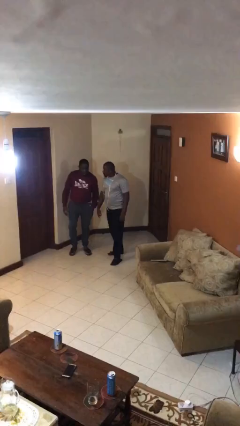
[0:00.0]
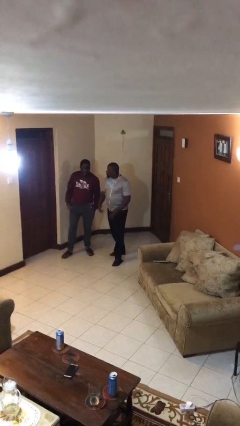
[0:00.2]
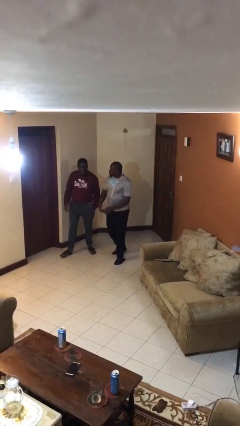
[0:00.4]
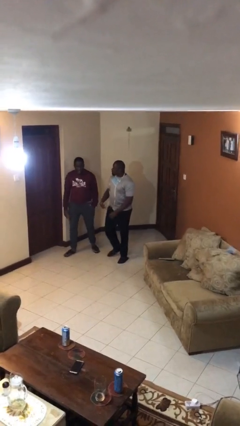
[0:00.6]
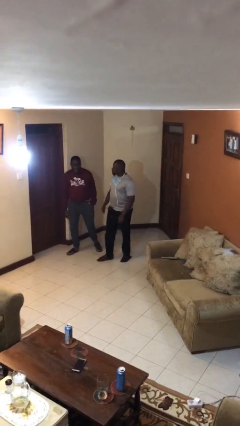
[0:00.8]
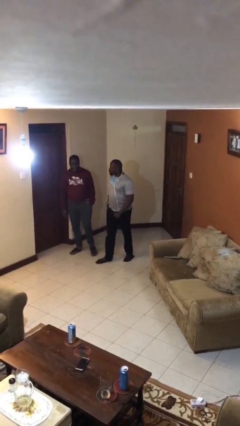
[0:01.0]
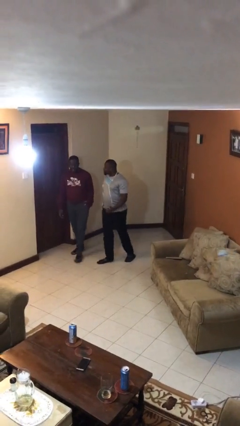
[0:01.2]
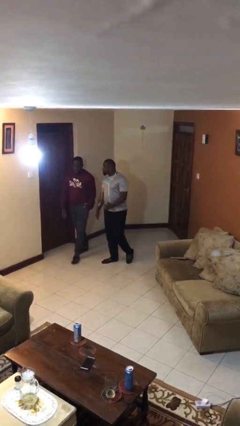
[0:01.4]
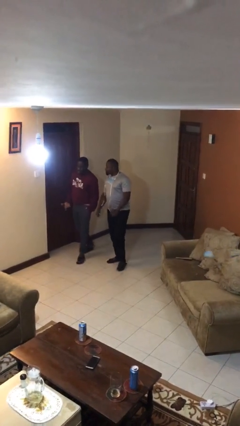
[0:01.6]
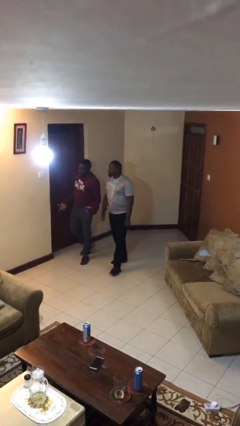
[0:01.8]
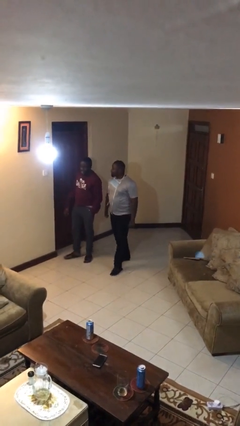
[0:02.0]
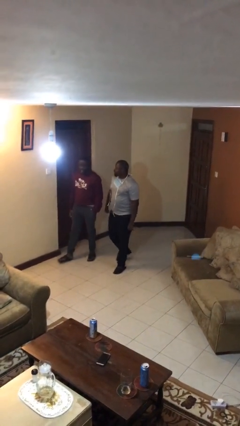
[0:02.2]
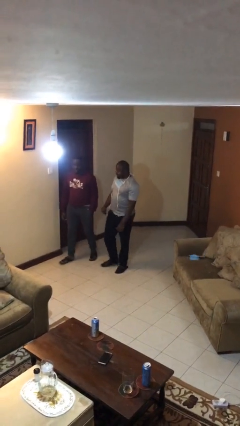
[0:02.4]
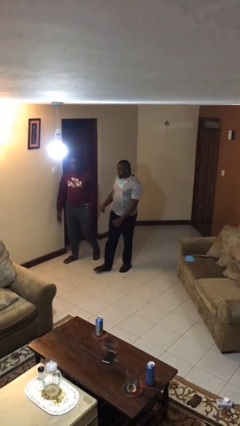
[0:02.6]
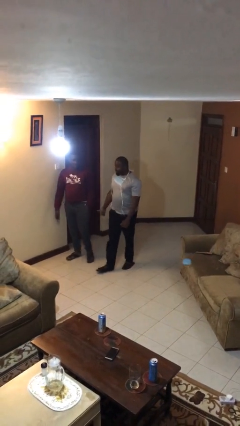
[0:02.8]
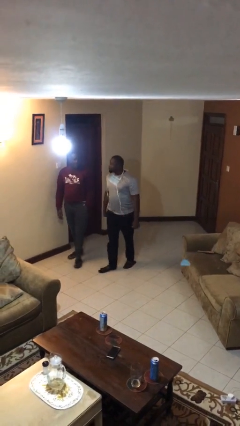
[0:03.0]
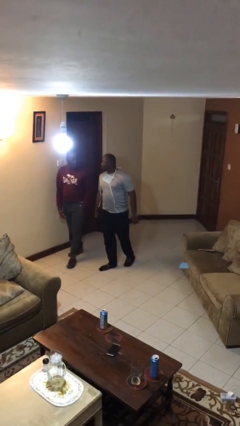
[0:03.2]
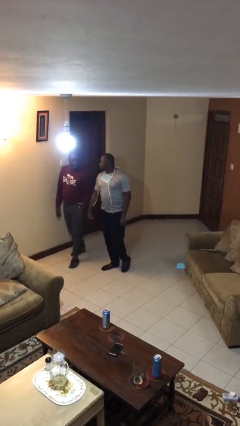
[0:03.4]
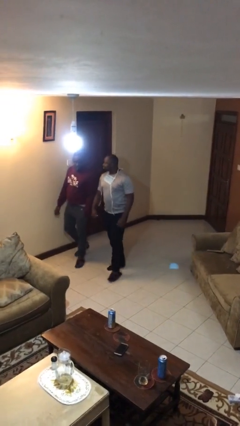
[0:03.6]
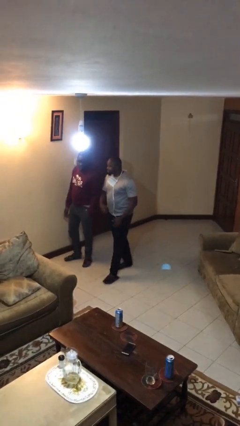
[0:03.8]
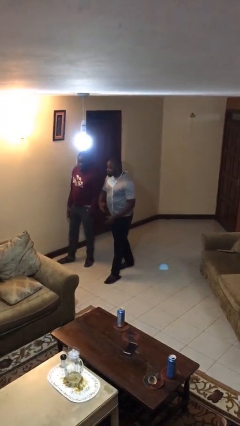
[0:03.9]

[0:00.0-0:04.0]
person talks to person

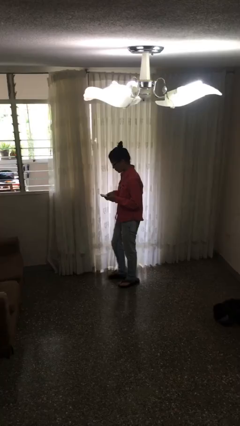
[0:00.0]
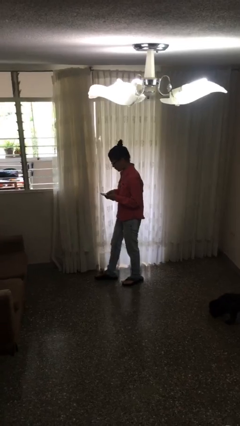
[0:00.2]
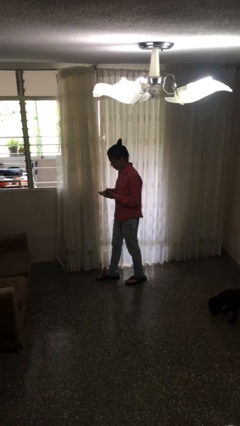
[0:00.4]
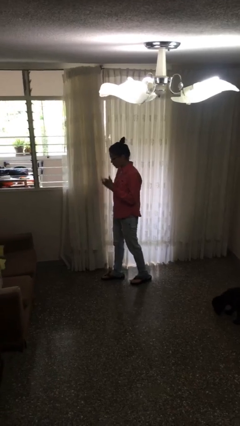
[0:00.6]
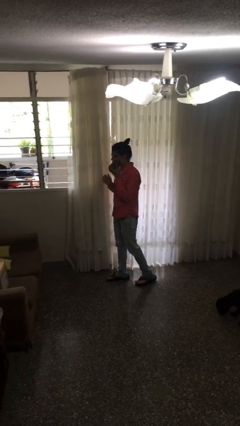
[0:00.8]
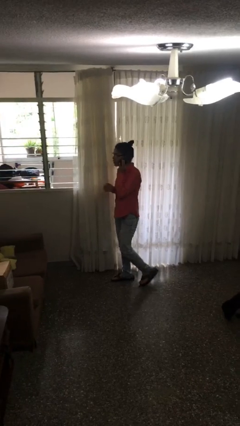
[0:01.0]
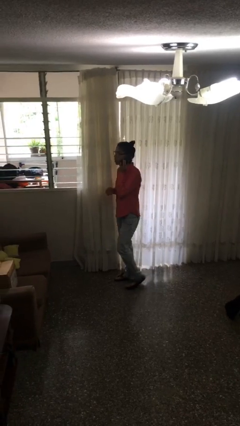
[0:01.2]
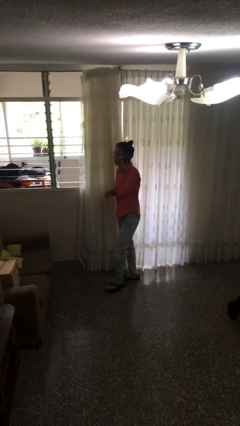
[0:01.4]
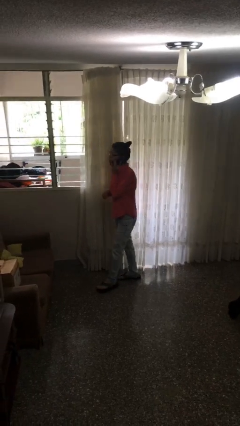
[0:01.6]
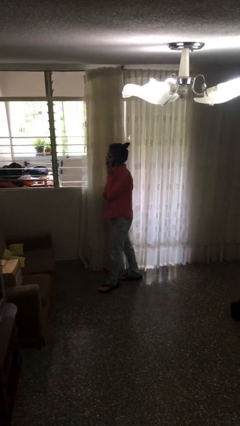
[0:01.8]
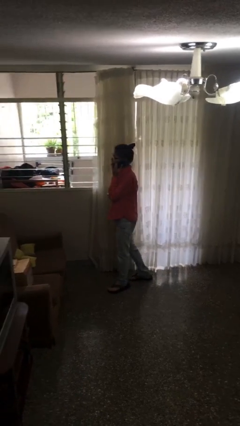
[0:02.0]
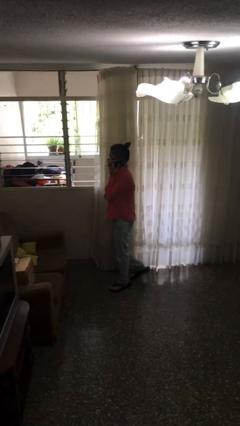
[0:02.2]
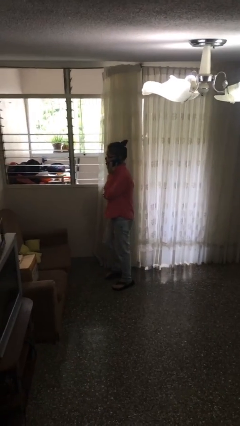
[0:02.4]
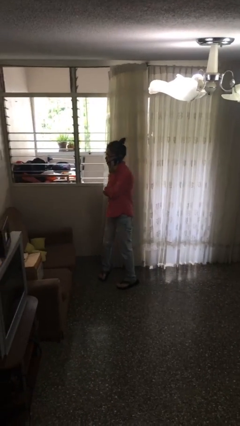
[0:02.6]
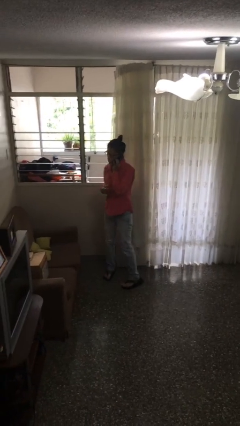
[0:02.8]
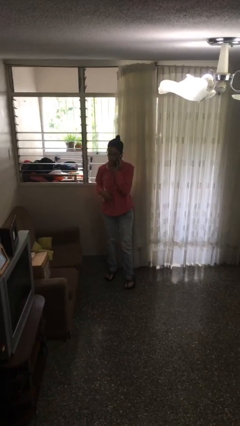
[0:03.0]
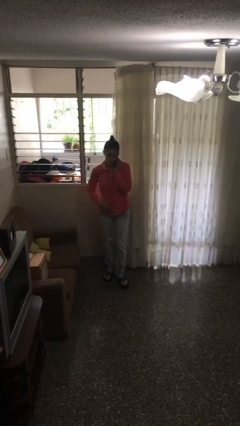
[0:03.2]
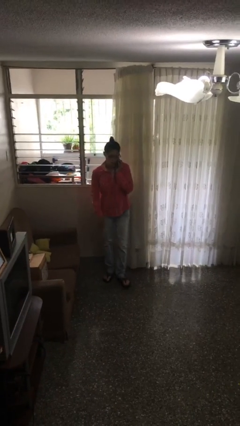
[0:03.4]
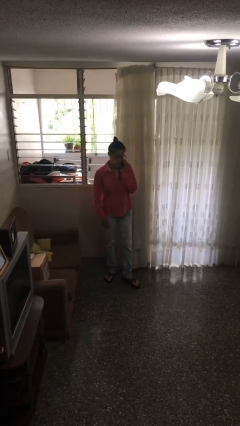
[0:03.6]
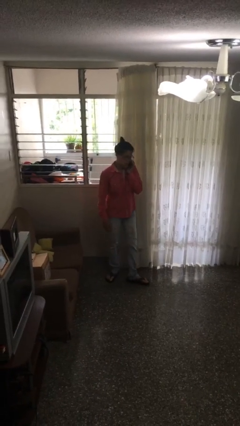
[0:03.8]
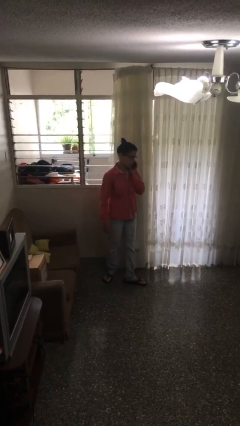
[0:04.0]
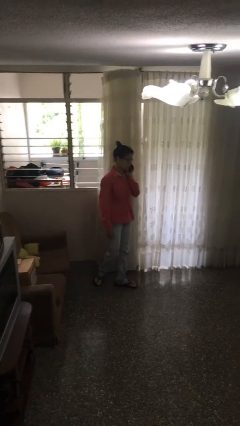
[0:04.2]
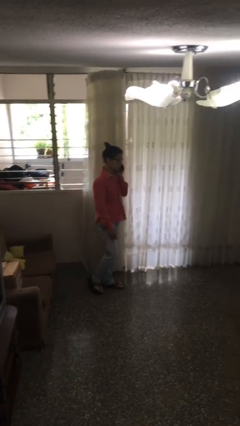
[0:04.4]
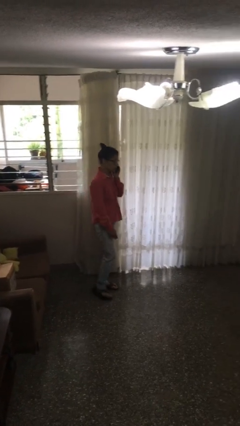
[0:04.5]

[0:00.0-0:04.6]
person talks on phone

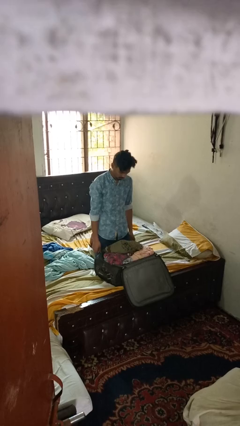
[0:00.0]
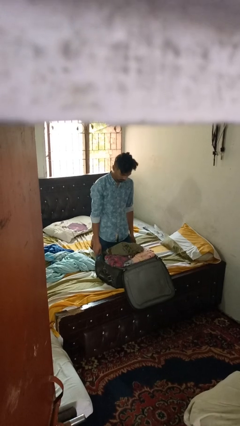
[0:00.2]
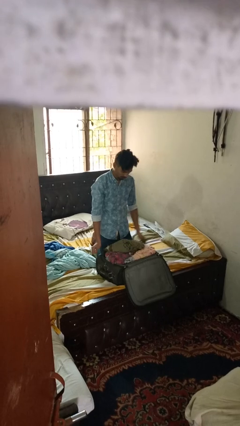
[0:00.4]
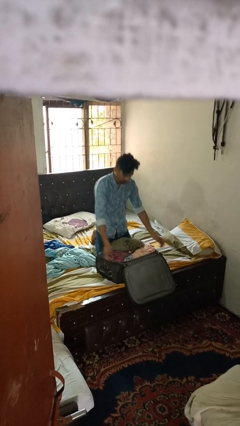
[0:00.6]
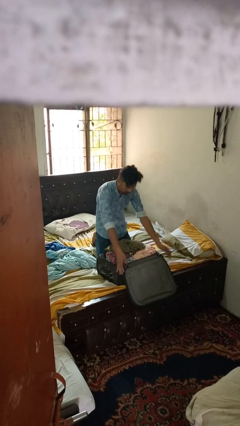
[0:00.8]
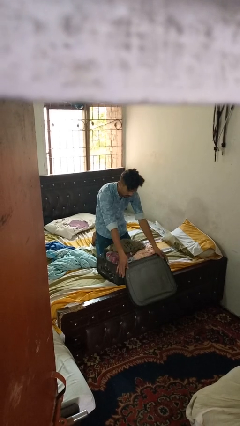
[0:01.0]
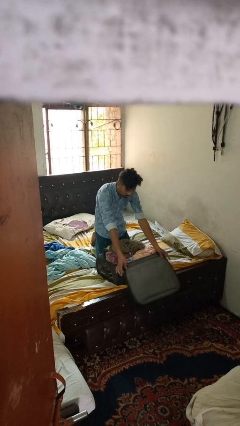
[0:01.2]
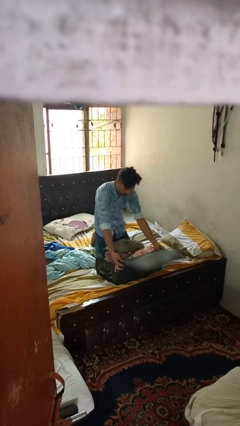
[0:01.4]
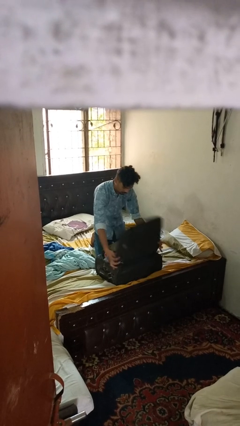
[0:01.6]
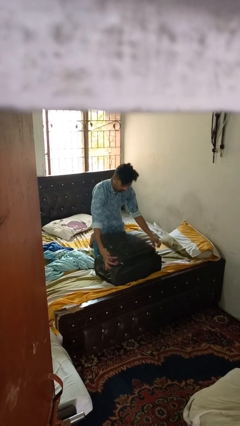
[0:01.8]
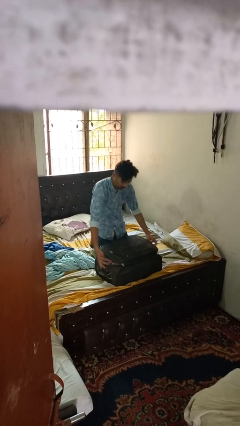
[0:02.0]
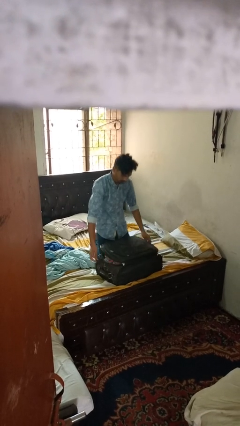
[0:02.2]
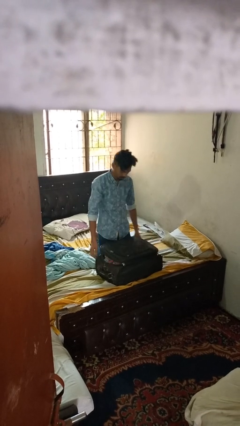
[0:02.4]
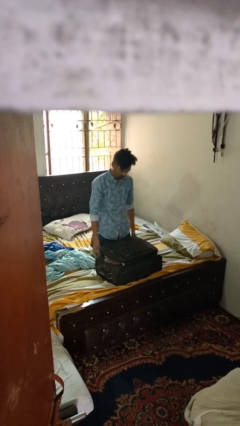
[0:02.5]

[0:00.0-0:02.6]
person closes suitcase

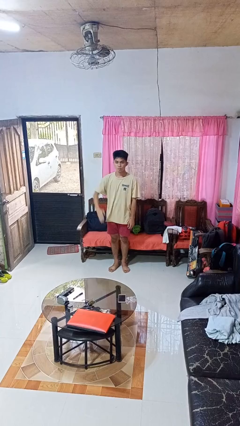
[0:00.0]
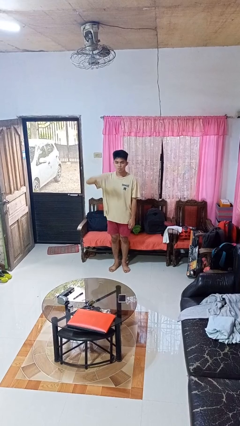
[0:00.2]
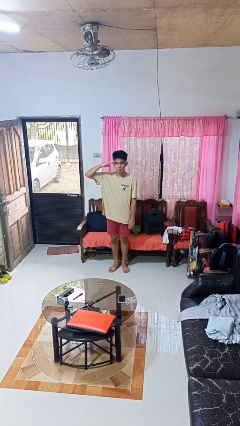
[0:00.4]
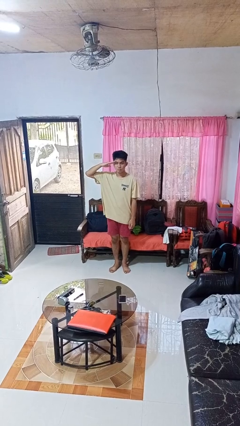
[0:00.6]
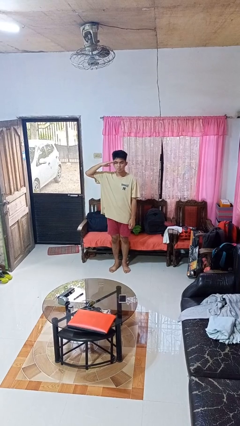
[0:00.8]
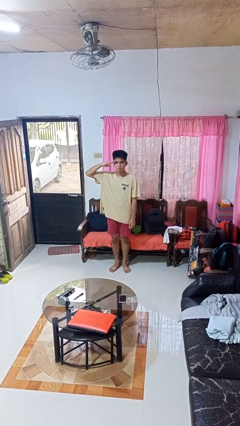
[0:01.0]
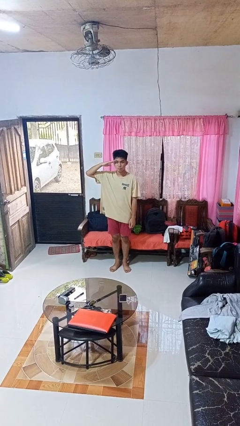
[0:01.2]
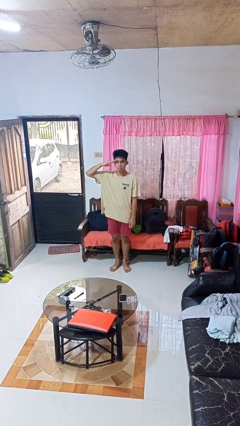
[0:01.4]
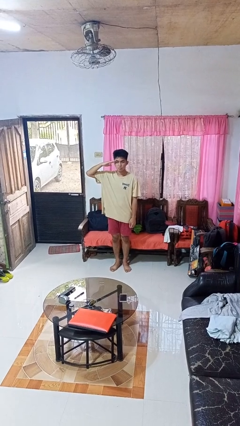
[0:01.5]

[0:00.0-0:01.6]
person salutes

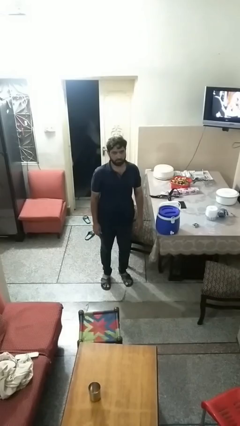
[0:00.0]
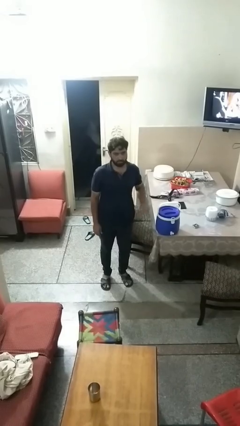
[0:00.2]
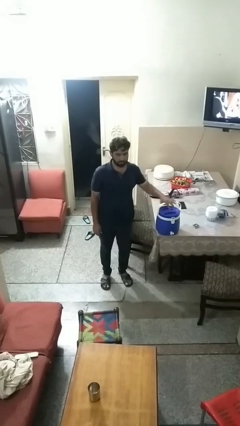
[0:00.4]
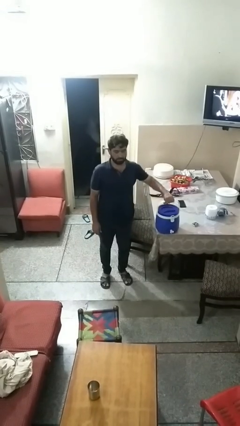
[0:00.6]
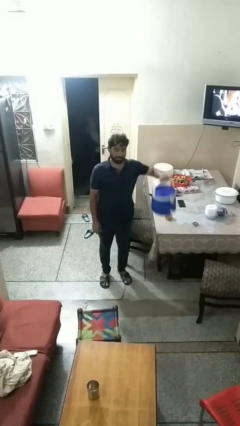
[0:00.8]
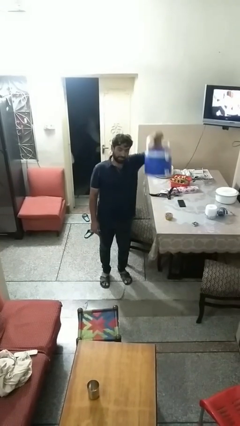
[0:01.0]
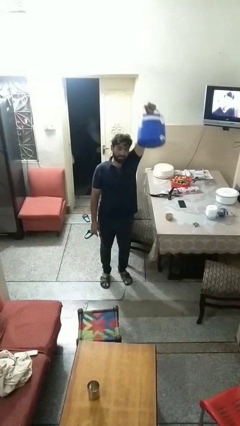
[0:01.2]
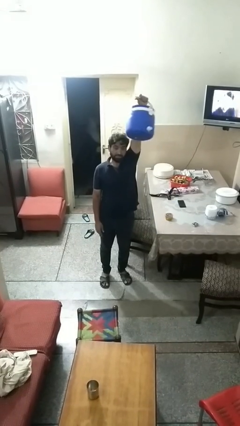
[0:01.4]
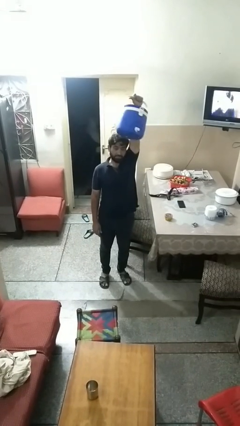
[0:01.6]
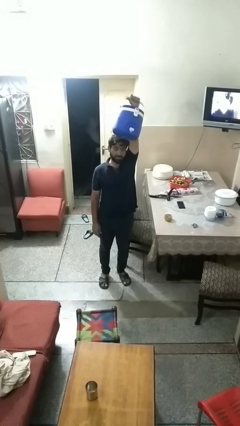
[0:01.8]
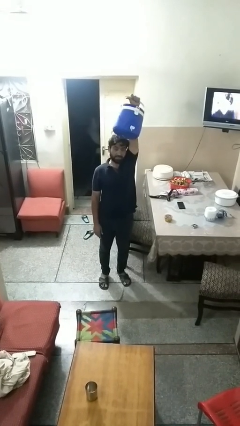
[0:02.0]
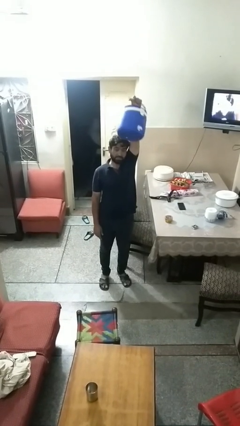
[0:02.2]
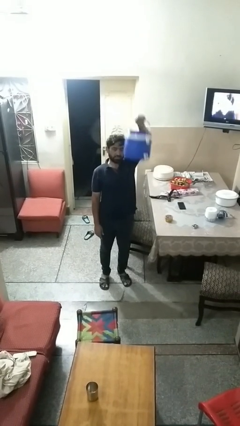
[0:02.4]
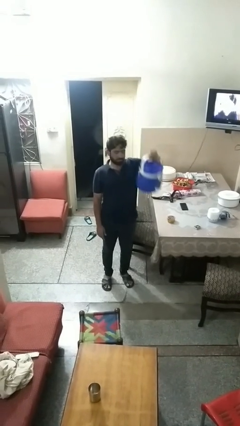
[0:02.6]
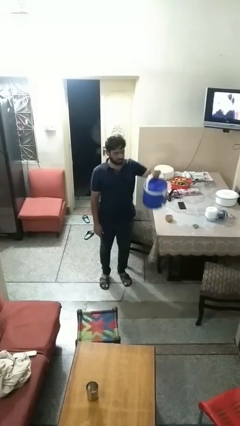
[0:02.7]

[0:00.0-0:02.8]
person holds object above head

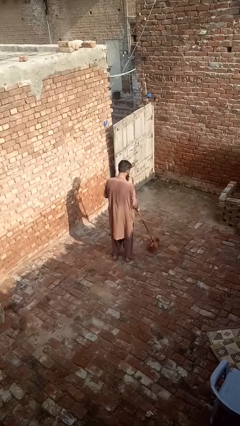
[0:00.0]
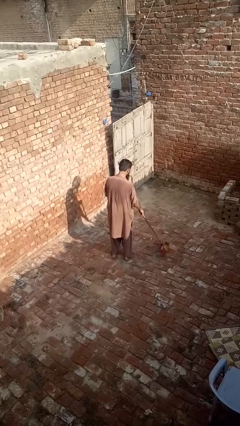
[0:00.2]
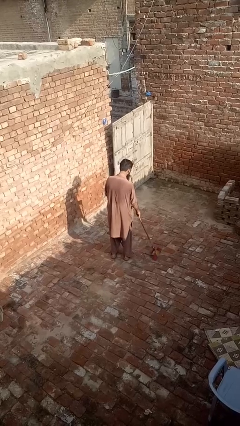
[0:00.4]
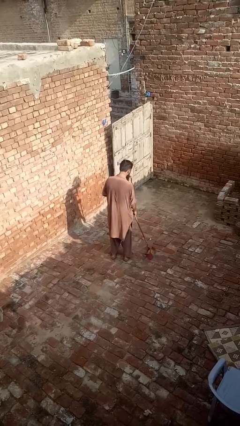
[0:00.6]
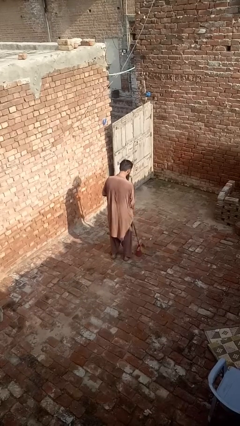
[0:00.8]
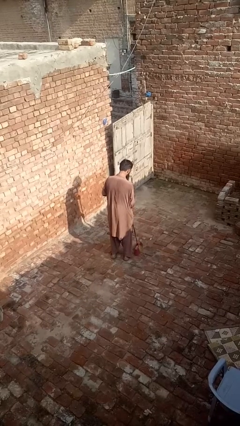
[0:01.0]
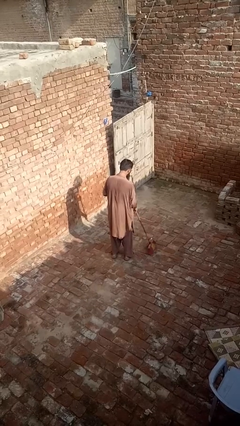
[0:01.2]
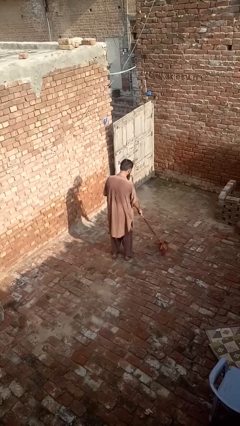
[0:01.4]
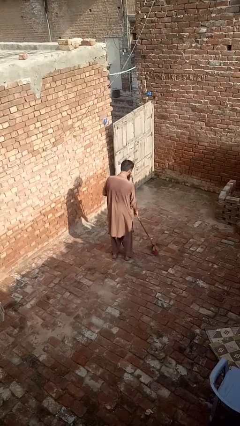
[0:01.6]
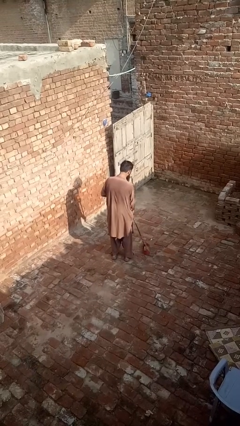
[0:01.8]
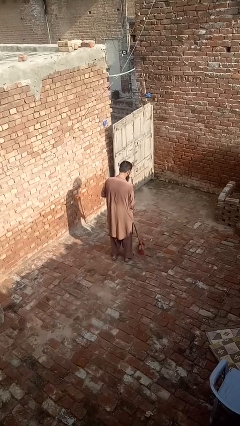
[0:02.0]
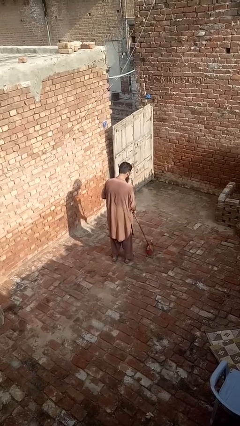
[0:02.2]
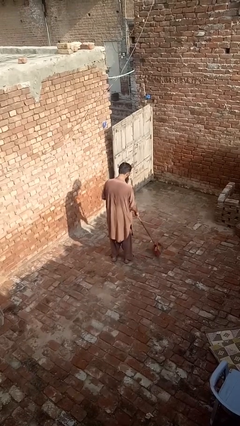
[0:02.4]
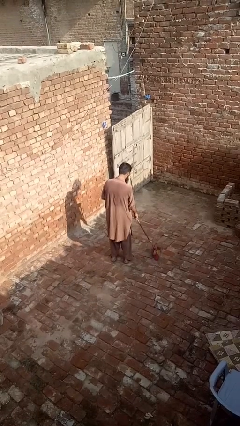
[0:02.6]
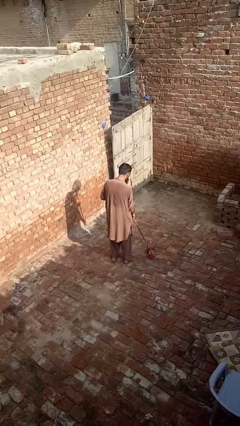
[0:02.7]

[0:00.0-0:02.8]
person sweeps floor
